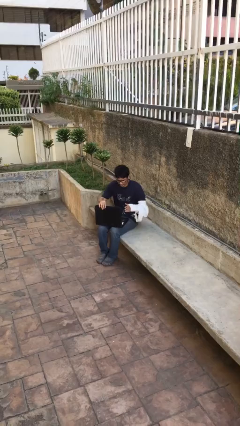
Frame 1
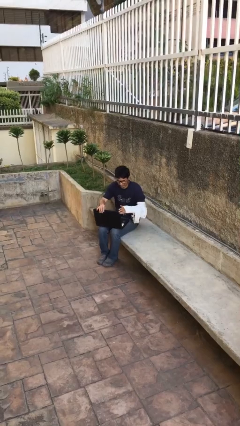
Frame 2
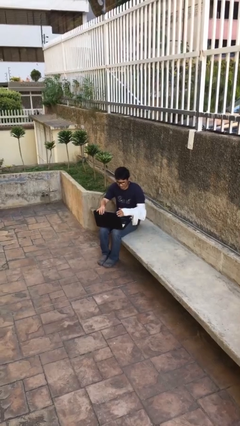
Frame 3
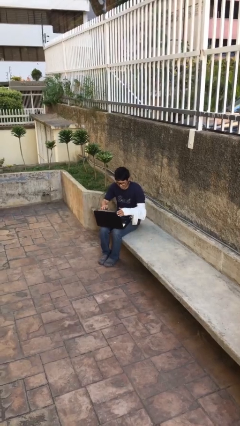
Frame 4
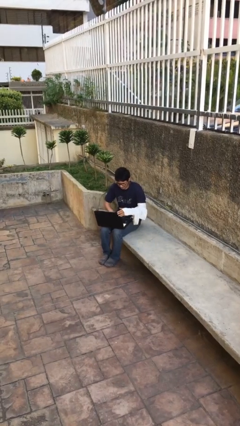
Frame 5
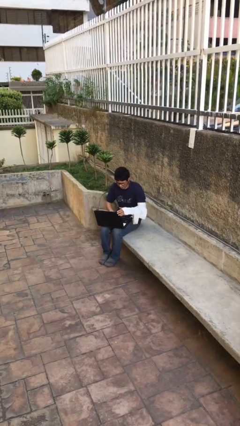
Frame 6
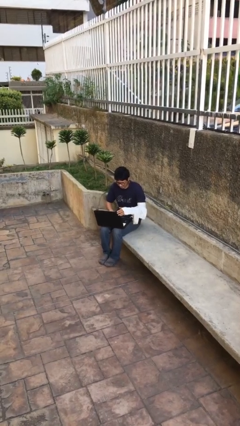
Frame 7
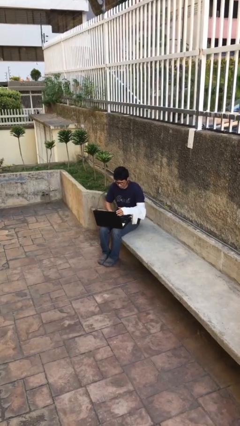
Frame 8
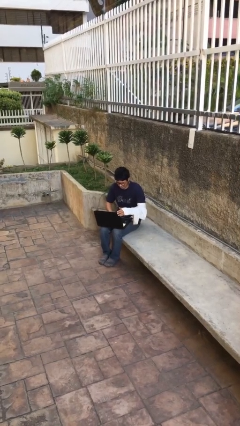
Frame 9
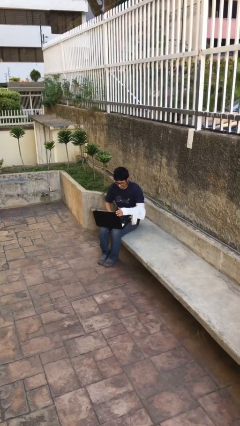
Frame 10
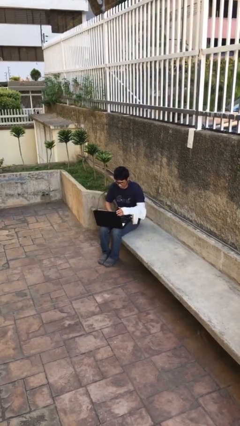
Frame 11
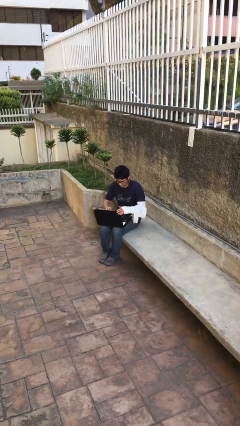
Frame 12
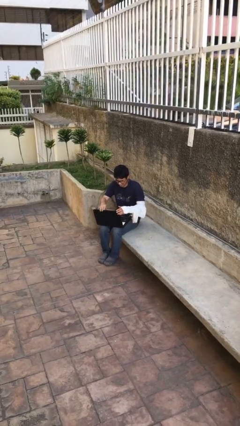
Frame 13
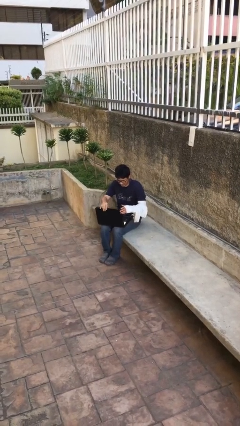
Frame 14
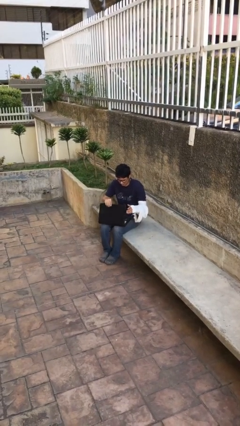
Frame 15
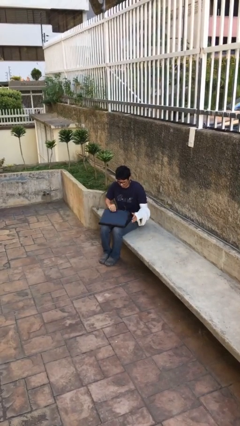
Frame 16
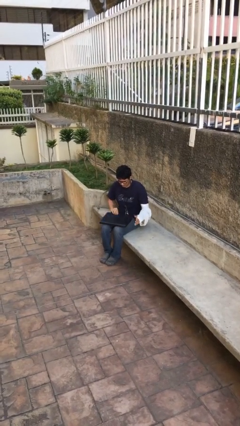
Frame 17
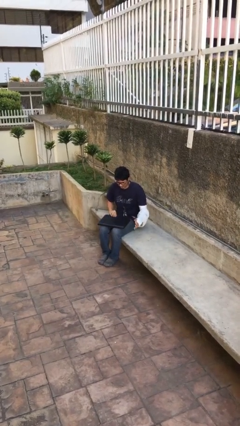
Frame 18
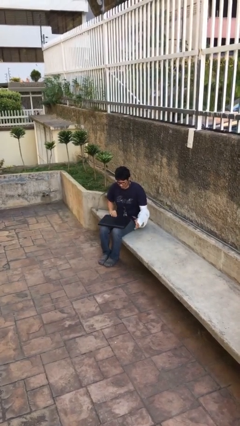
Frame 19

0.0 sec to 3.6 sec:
person interacts with laptop

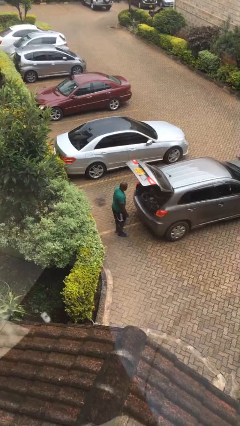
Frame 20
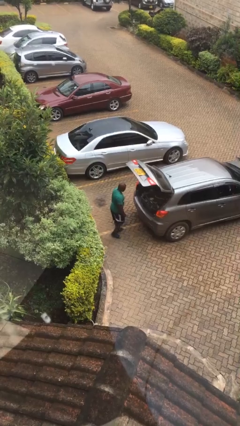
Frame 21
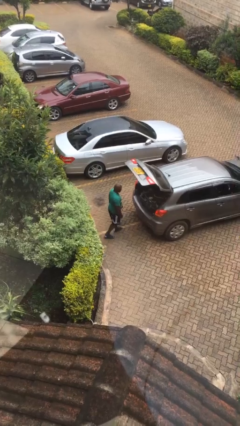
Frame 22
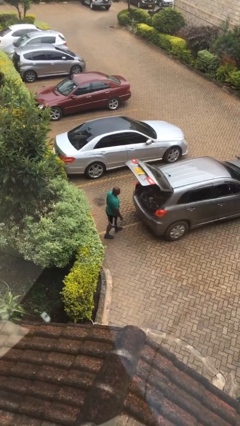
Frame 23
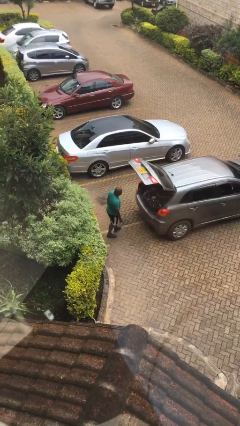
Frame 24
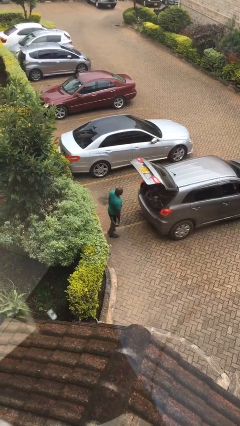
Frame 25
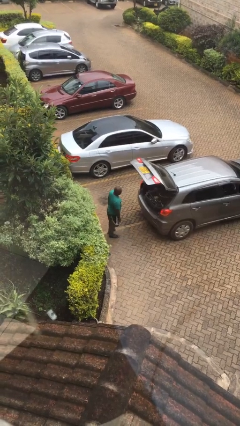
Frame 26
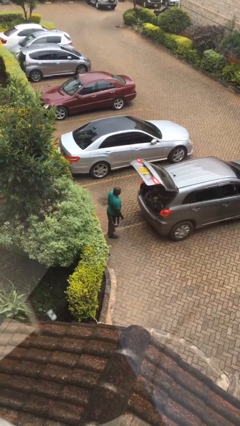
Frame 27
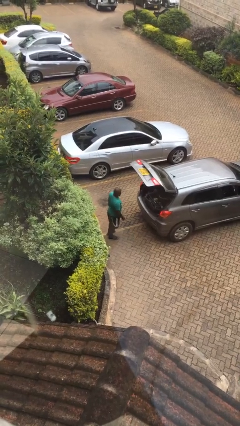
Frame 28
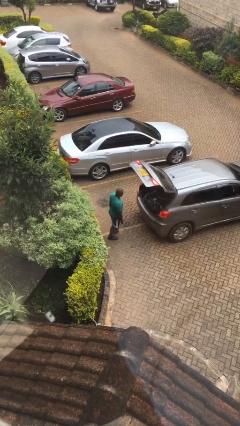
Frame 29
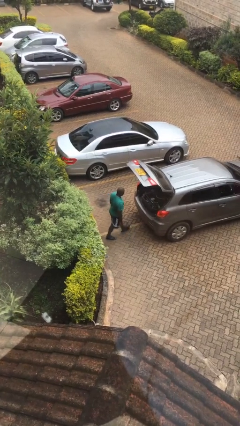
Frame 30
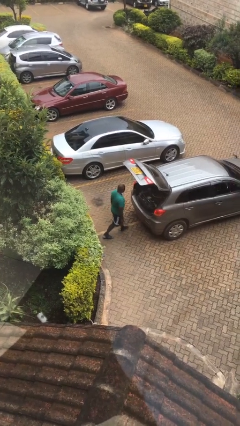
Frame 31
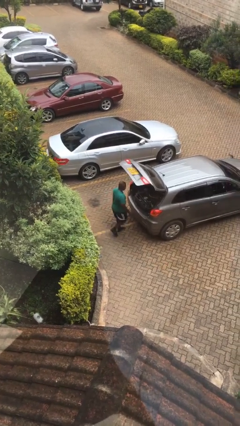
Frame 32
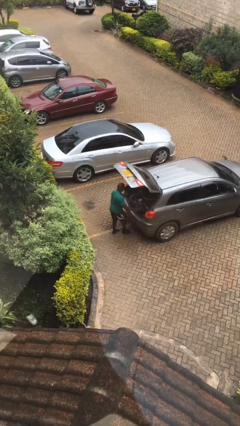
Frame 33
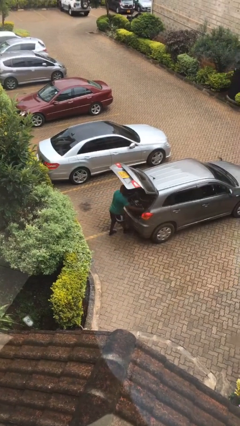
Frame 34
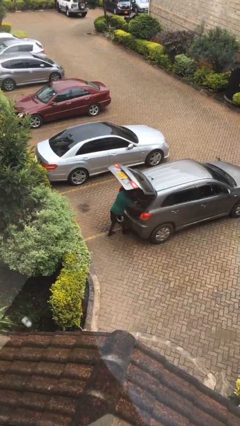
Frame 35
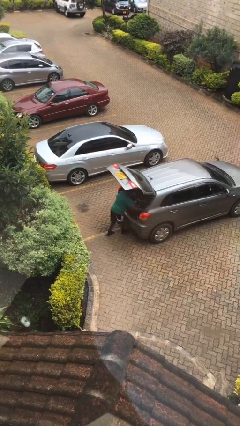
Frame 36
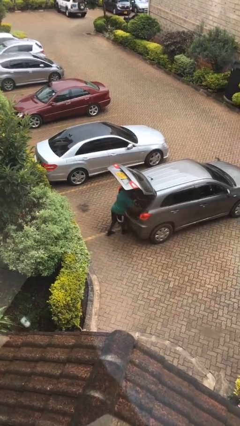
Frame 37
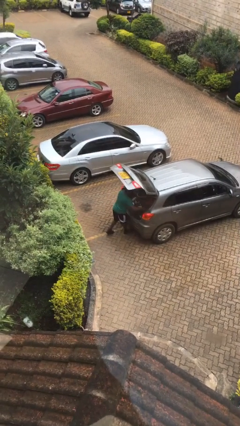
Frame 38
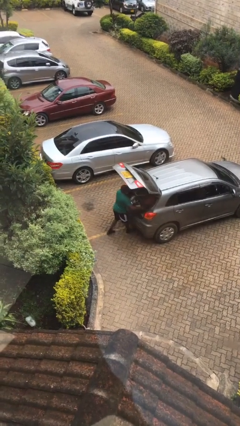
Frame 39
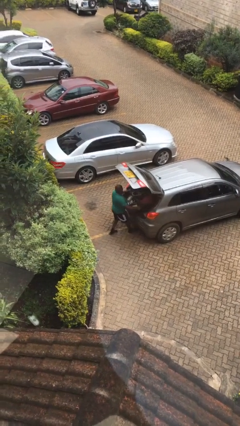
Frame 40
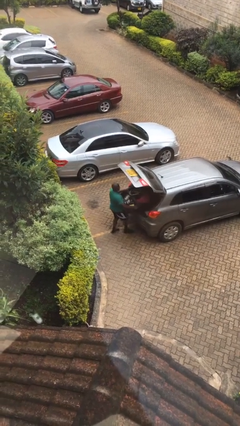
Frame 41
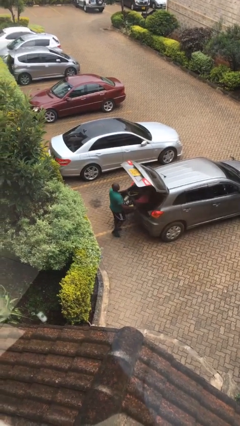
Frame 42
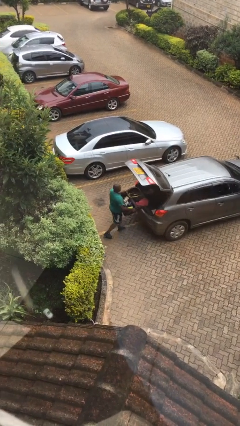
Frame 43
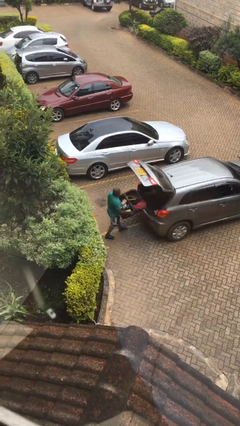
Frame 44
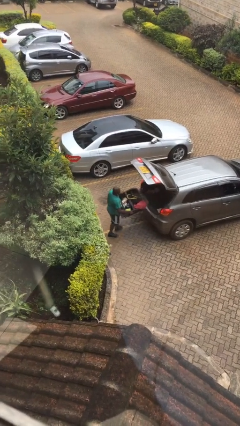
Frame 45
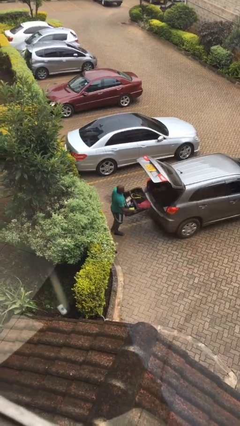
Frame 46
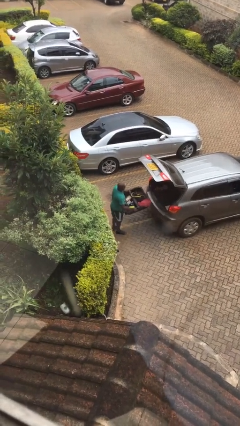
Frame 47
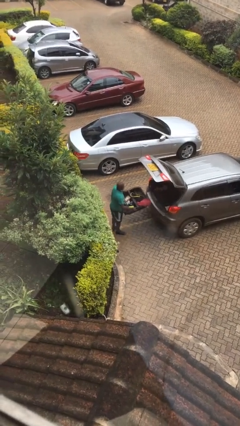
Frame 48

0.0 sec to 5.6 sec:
person unloads car

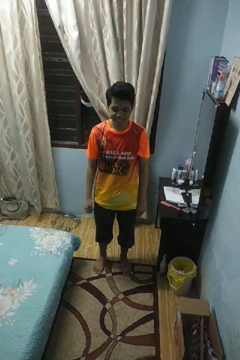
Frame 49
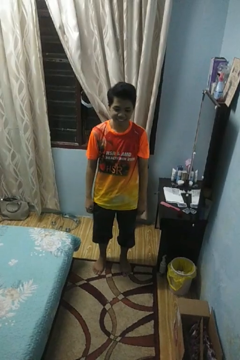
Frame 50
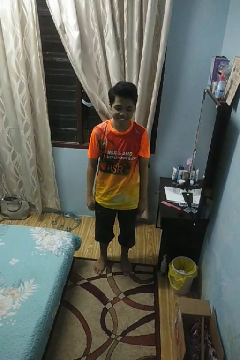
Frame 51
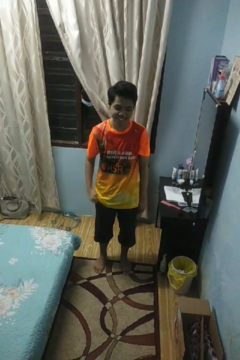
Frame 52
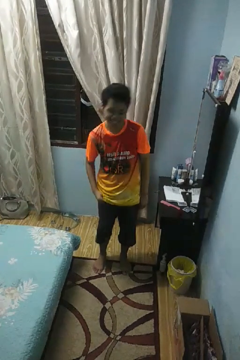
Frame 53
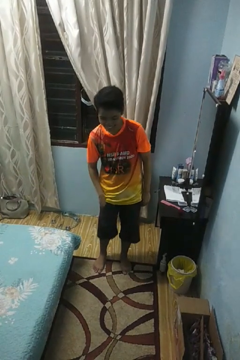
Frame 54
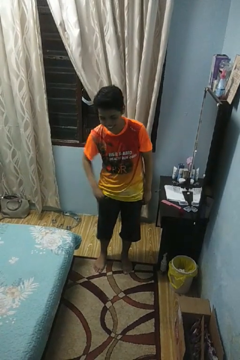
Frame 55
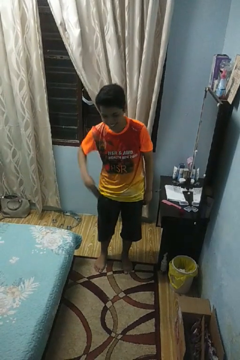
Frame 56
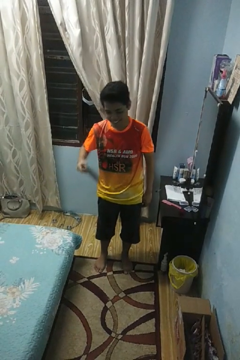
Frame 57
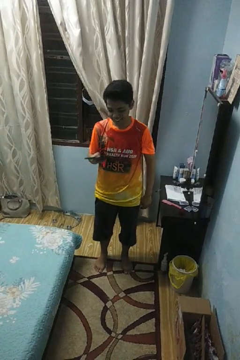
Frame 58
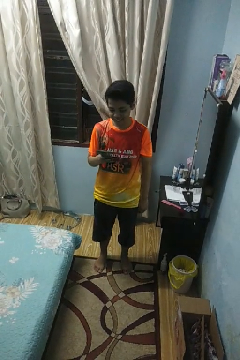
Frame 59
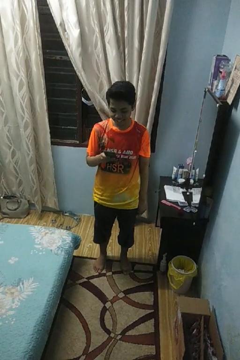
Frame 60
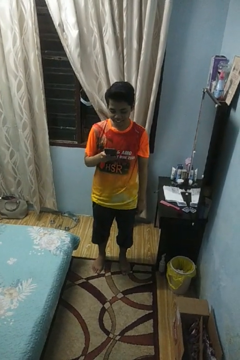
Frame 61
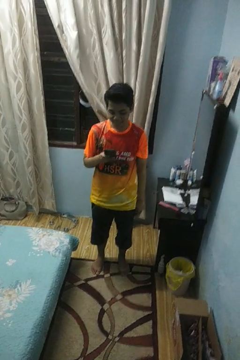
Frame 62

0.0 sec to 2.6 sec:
person takes phone from pocket

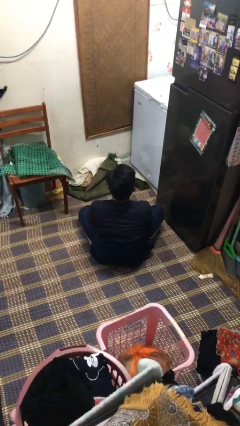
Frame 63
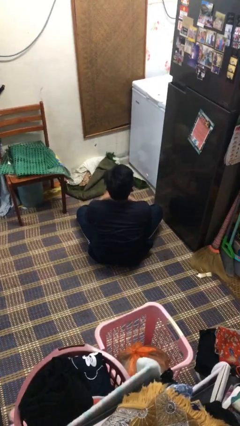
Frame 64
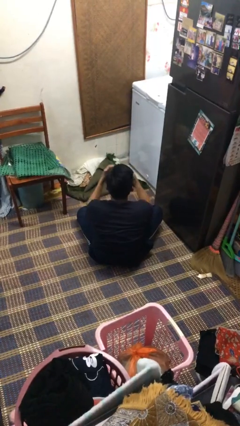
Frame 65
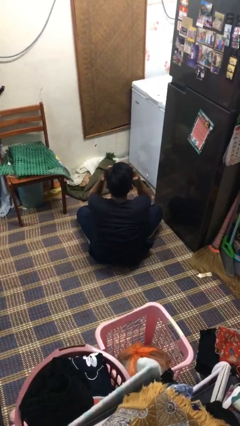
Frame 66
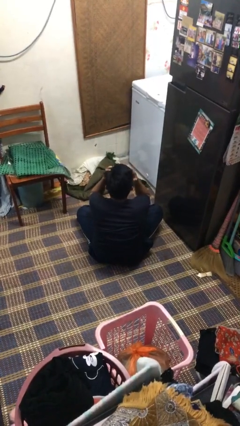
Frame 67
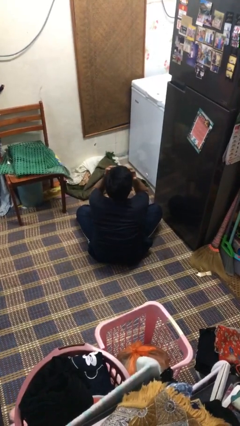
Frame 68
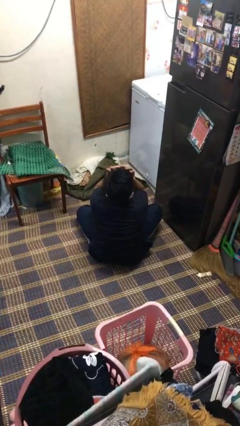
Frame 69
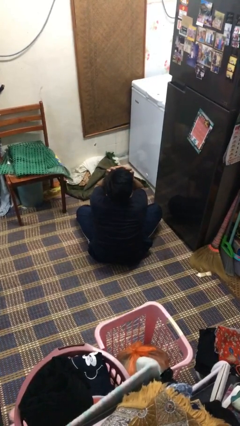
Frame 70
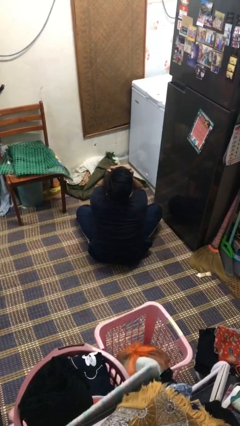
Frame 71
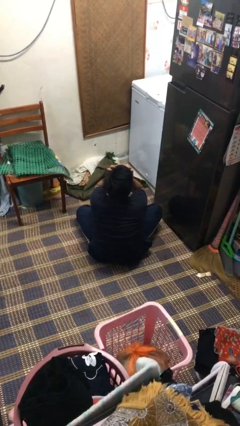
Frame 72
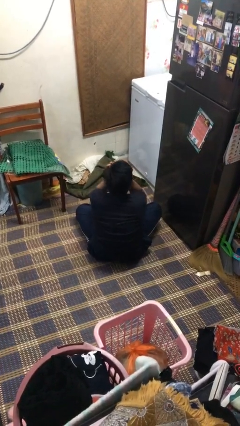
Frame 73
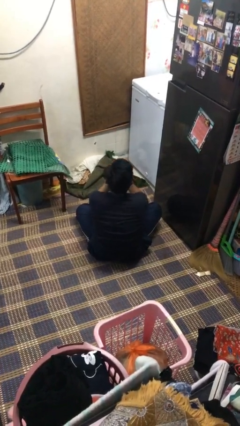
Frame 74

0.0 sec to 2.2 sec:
person covers face with hands

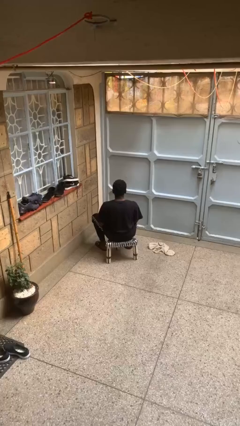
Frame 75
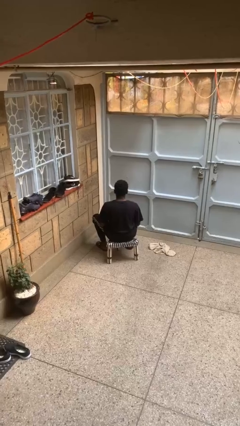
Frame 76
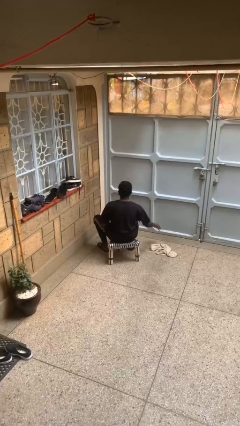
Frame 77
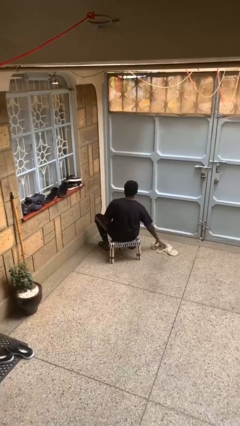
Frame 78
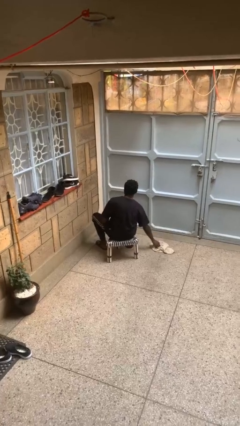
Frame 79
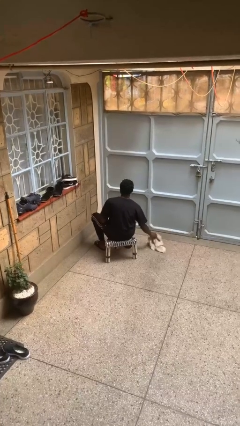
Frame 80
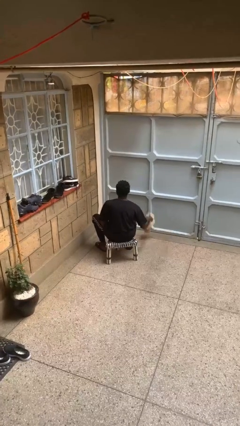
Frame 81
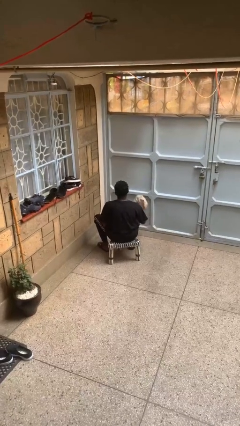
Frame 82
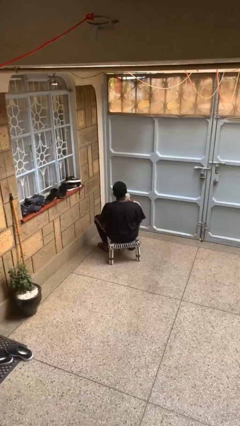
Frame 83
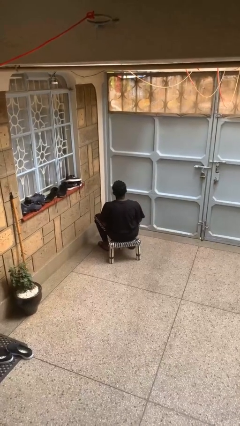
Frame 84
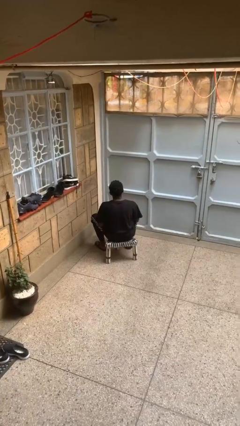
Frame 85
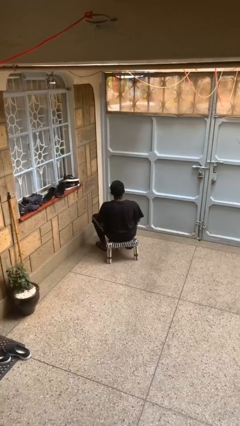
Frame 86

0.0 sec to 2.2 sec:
person picks up object from floor

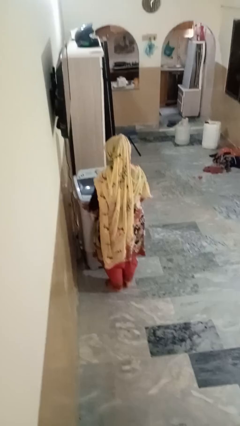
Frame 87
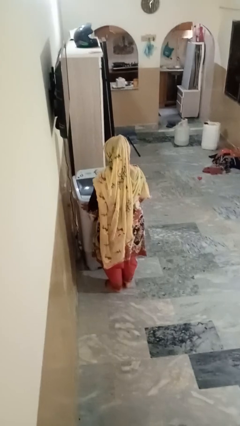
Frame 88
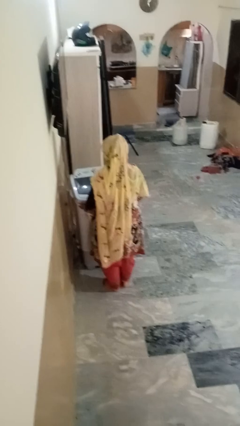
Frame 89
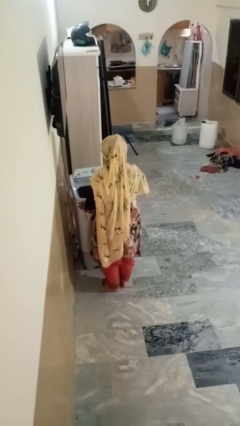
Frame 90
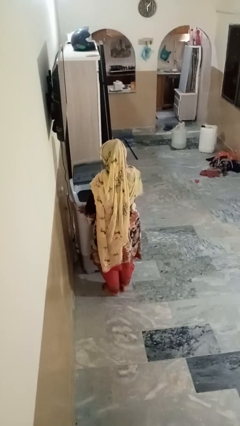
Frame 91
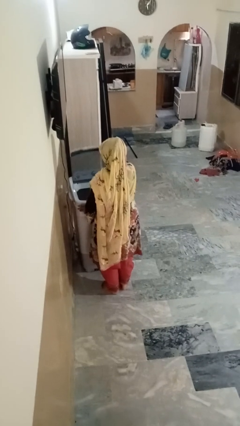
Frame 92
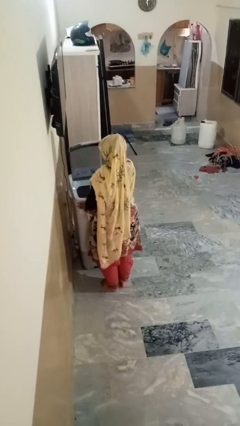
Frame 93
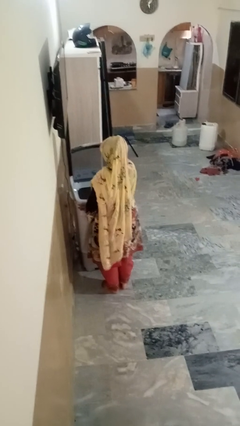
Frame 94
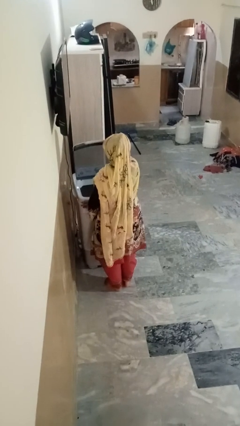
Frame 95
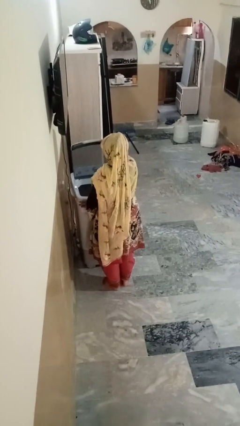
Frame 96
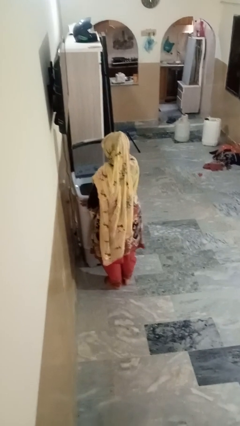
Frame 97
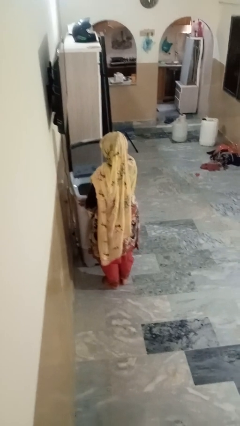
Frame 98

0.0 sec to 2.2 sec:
person opens clothes washer
